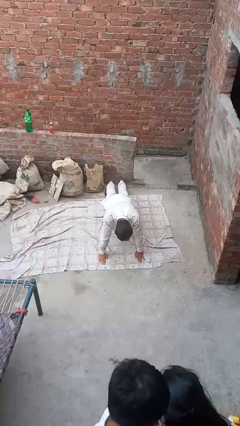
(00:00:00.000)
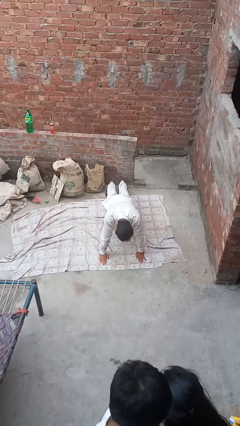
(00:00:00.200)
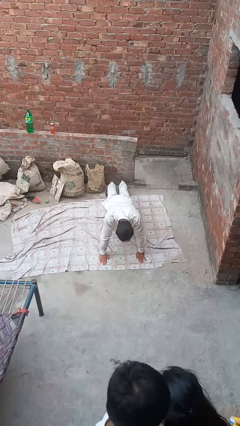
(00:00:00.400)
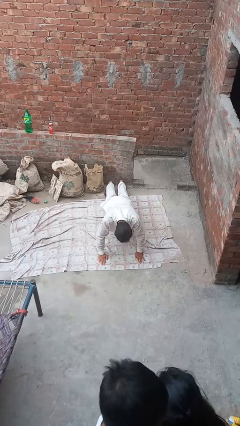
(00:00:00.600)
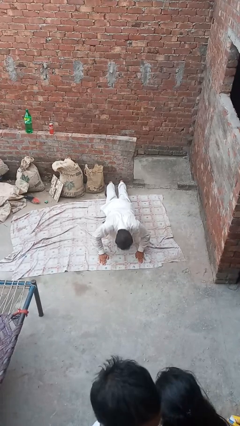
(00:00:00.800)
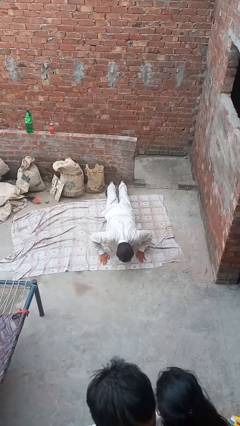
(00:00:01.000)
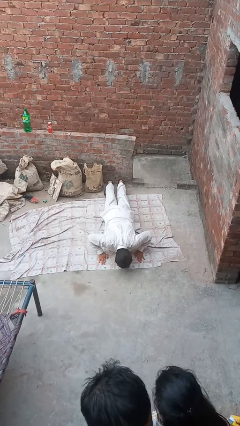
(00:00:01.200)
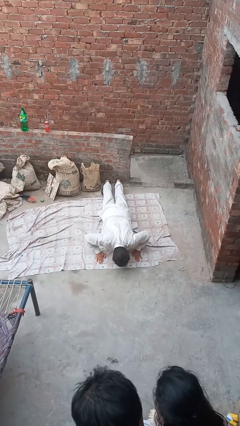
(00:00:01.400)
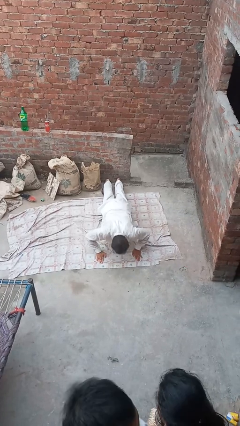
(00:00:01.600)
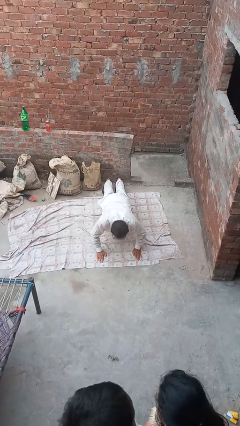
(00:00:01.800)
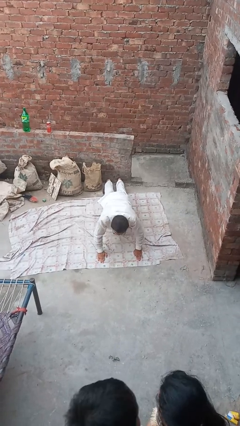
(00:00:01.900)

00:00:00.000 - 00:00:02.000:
person exercises with pushup

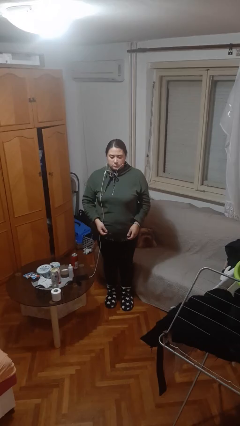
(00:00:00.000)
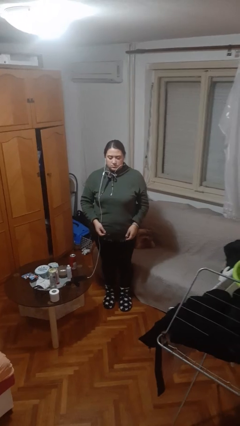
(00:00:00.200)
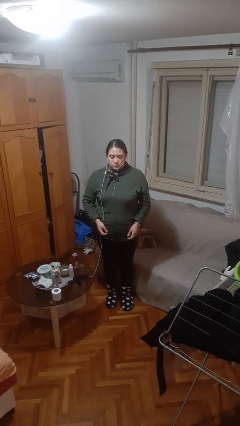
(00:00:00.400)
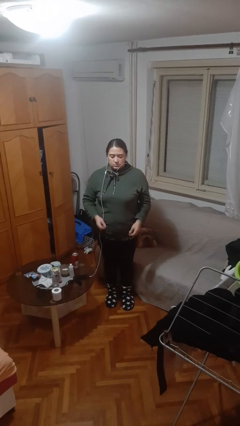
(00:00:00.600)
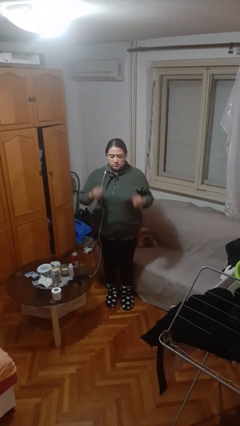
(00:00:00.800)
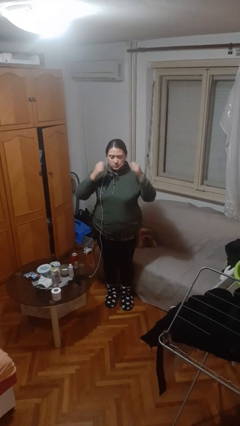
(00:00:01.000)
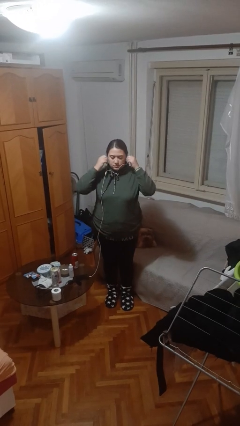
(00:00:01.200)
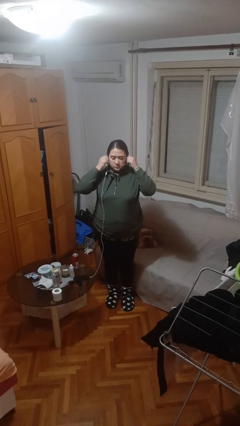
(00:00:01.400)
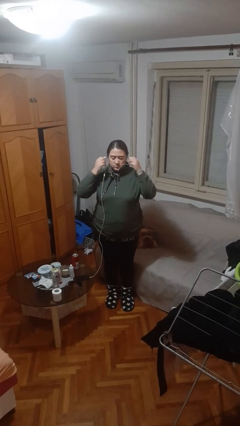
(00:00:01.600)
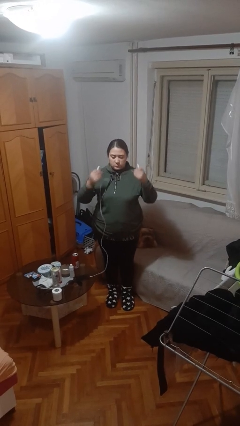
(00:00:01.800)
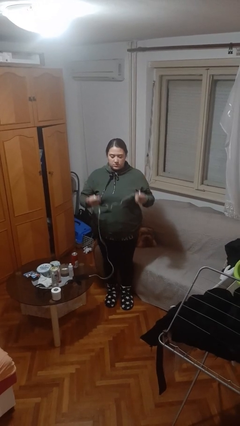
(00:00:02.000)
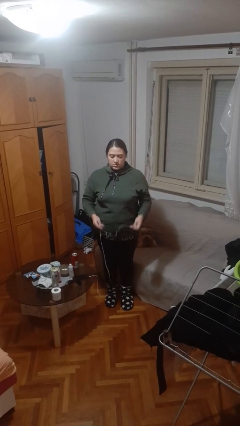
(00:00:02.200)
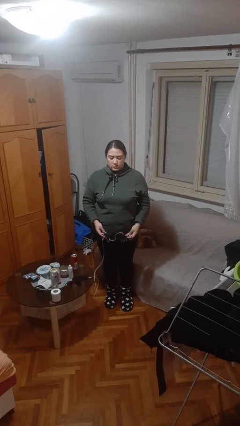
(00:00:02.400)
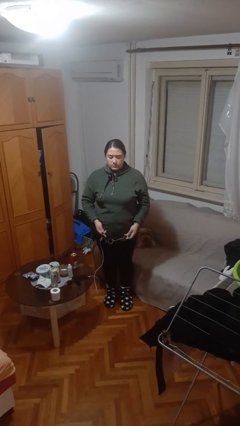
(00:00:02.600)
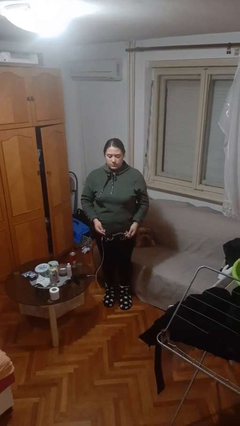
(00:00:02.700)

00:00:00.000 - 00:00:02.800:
person takes off headphones

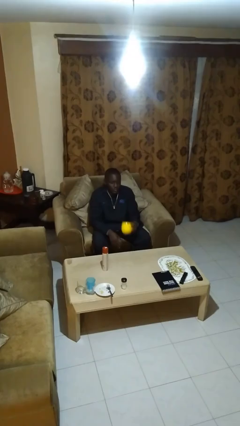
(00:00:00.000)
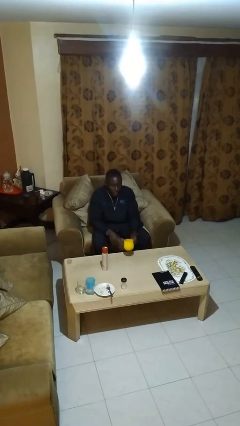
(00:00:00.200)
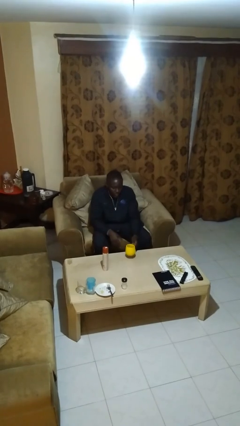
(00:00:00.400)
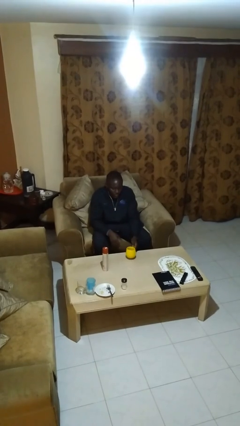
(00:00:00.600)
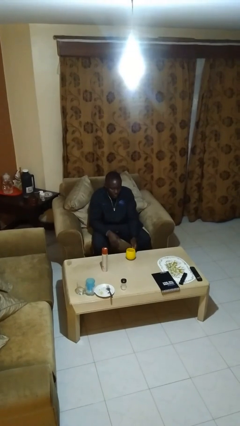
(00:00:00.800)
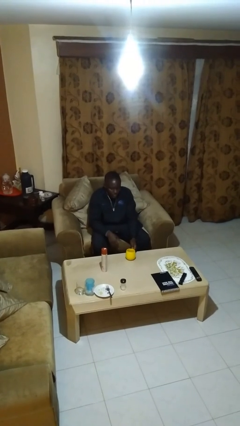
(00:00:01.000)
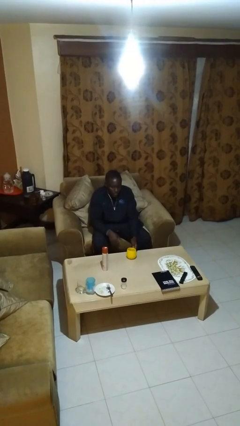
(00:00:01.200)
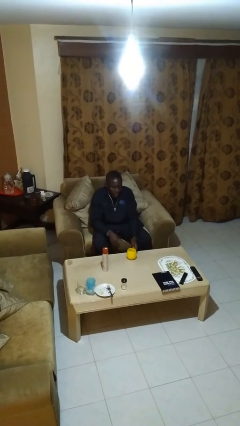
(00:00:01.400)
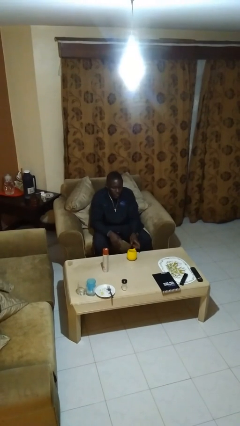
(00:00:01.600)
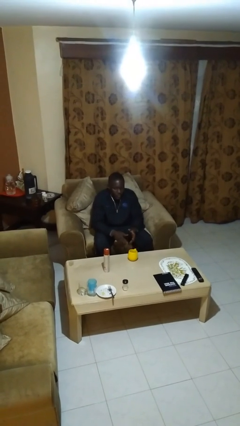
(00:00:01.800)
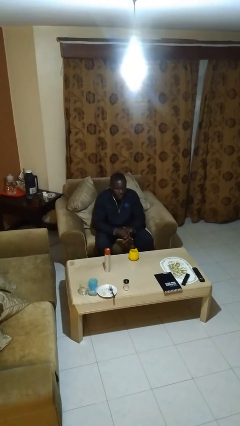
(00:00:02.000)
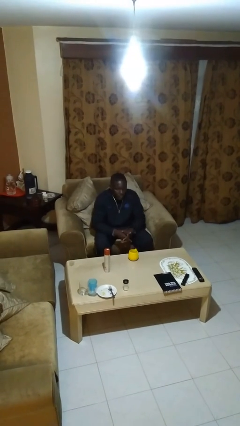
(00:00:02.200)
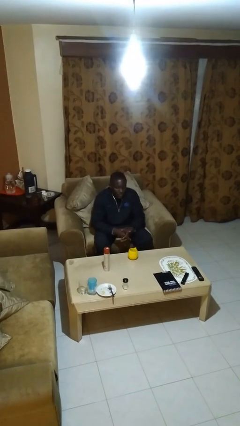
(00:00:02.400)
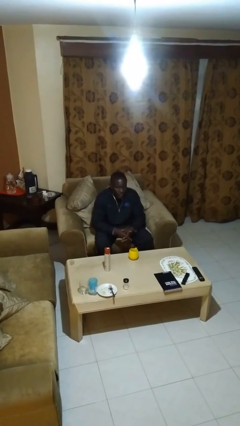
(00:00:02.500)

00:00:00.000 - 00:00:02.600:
person puts down object on table

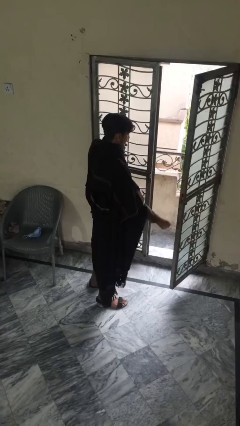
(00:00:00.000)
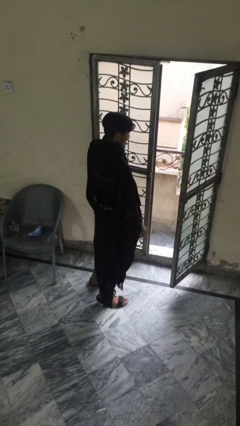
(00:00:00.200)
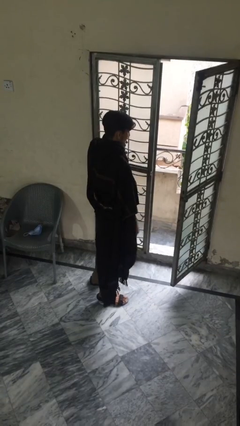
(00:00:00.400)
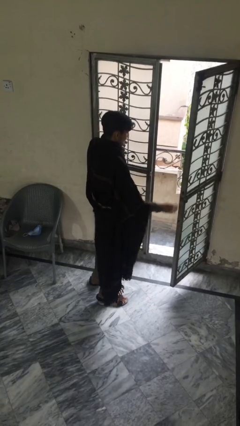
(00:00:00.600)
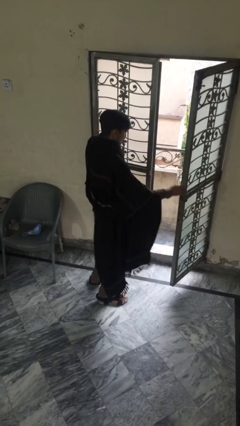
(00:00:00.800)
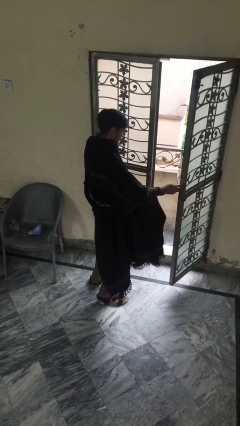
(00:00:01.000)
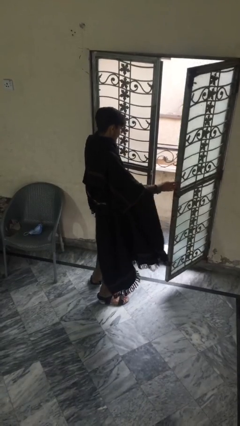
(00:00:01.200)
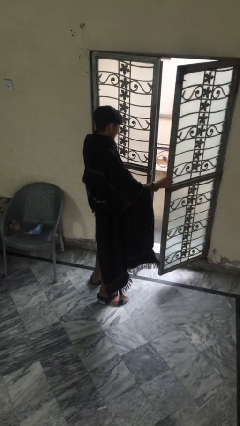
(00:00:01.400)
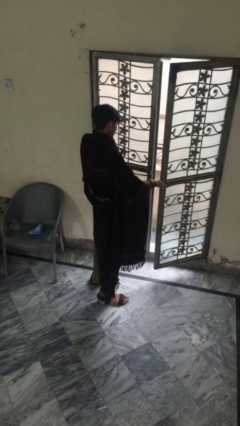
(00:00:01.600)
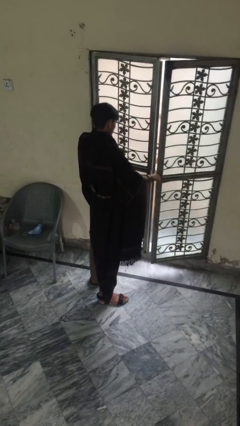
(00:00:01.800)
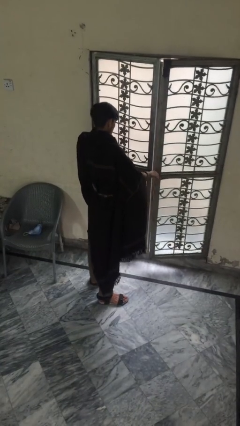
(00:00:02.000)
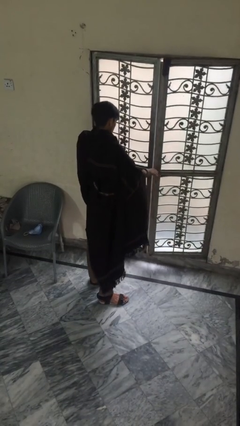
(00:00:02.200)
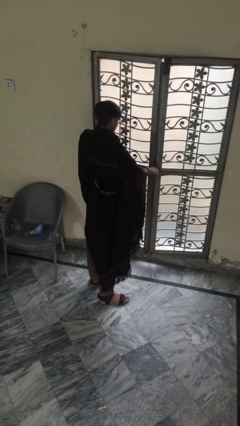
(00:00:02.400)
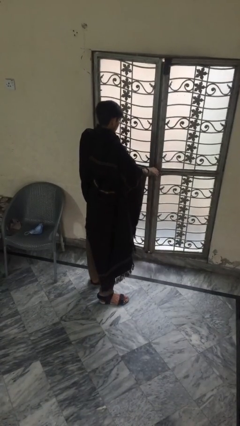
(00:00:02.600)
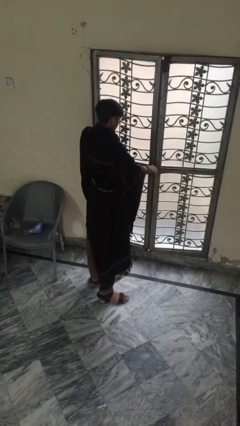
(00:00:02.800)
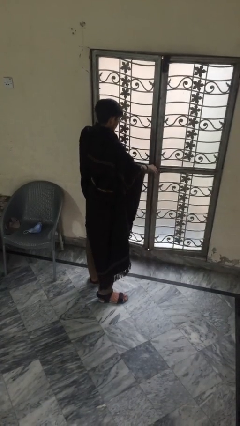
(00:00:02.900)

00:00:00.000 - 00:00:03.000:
person closes facility door

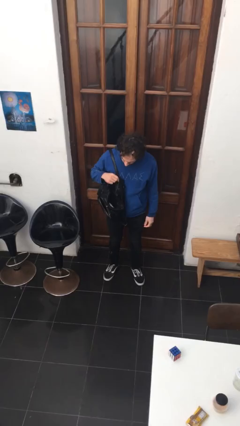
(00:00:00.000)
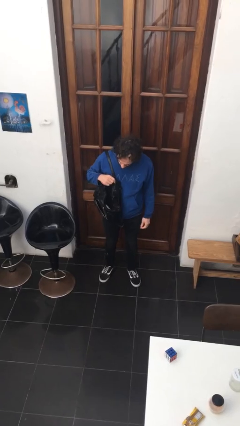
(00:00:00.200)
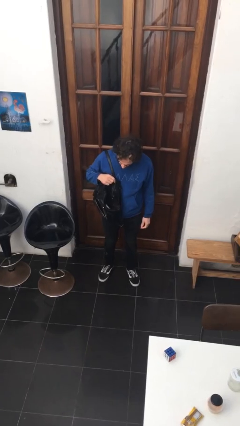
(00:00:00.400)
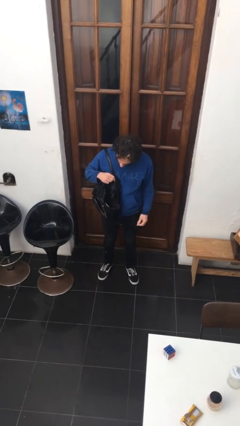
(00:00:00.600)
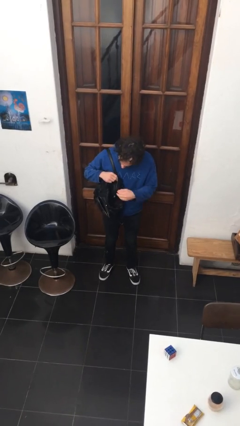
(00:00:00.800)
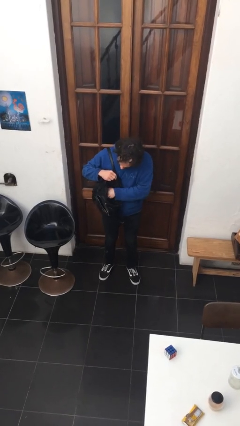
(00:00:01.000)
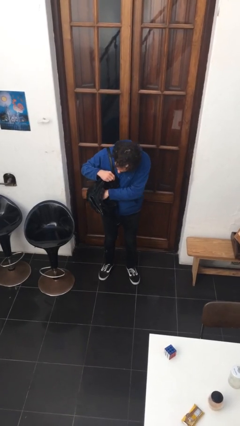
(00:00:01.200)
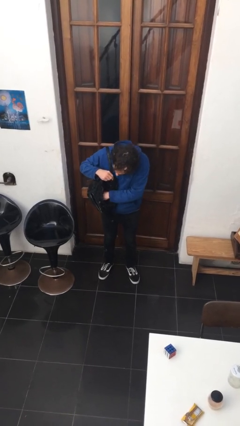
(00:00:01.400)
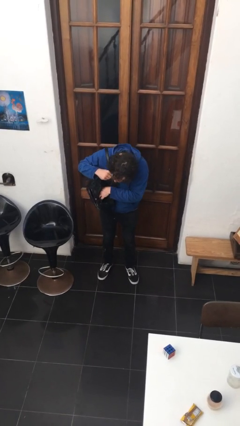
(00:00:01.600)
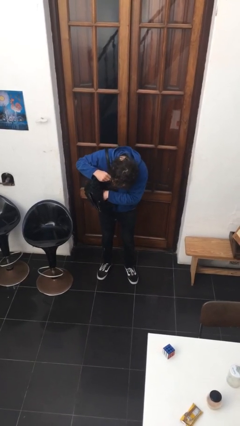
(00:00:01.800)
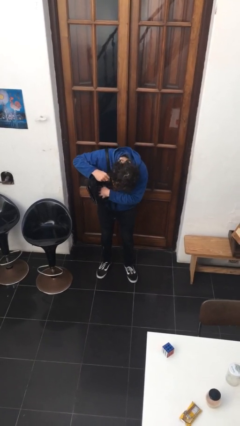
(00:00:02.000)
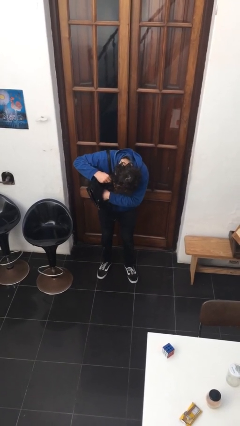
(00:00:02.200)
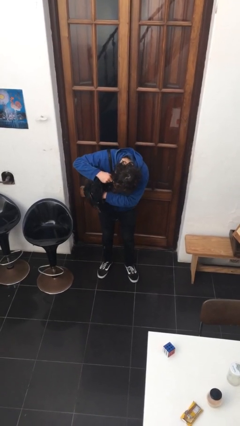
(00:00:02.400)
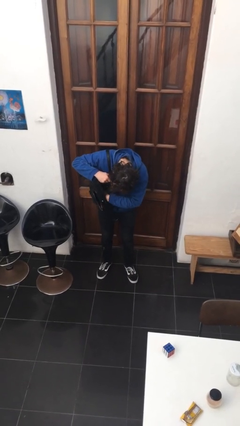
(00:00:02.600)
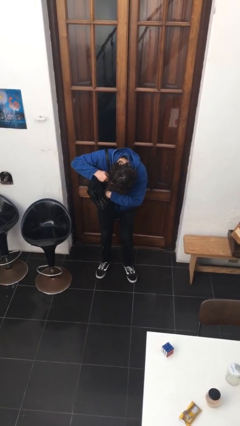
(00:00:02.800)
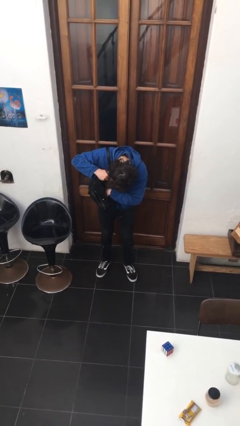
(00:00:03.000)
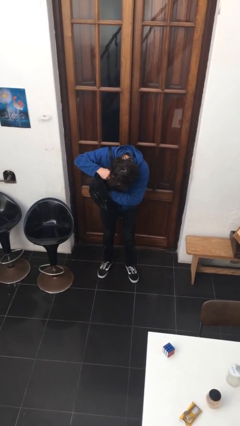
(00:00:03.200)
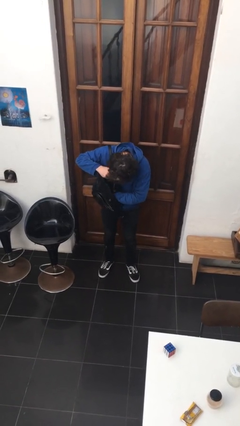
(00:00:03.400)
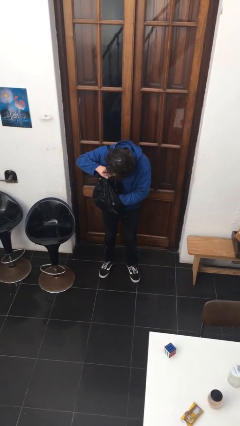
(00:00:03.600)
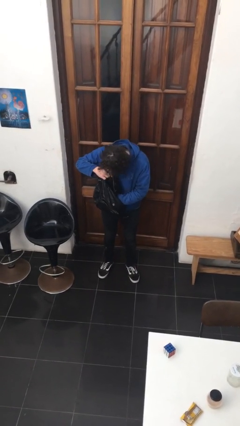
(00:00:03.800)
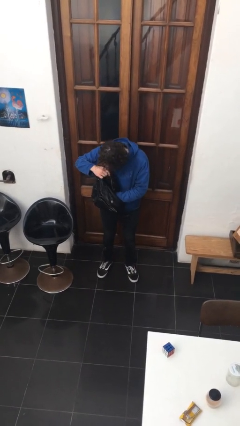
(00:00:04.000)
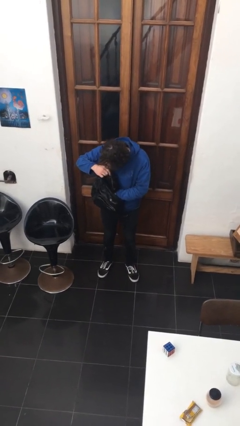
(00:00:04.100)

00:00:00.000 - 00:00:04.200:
person searches in purse

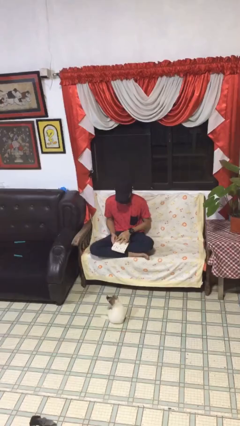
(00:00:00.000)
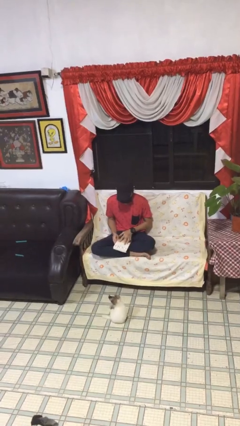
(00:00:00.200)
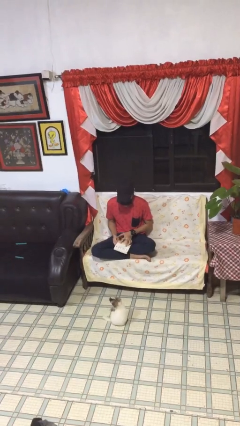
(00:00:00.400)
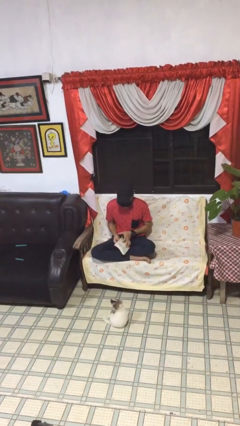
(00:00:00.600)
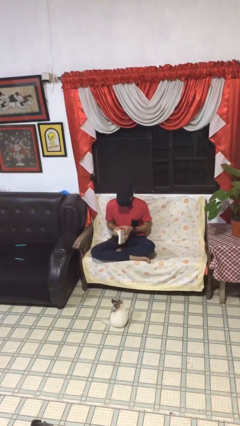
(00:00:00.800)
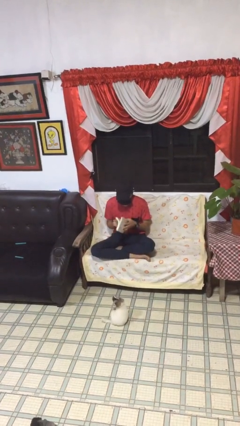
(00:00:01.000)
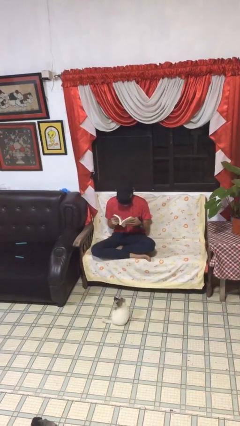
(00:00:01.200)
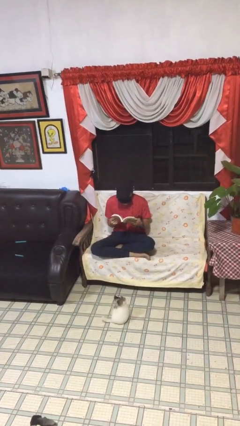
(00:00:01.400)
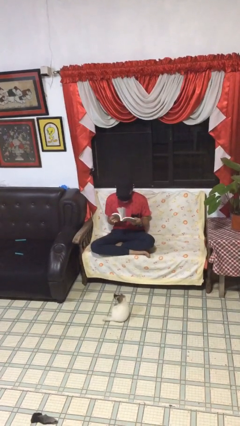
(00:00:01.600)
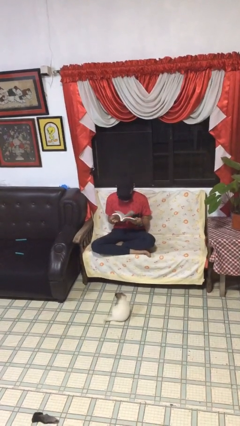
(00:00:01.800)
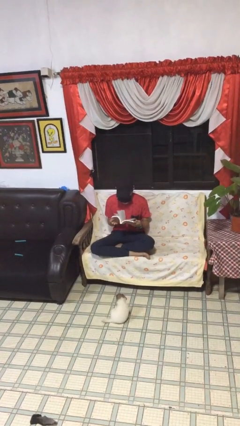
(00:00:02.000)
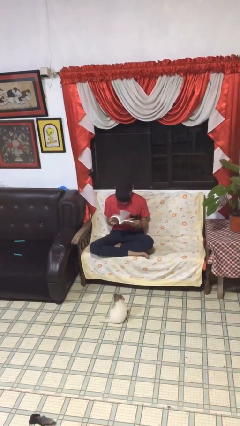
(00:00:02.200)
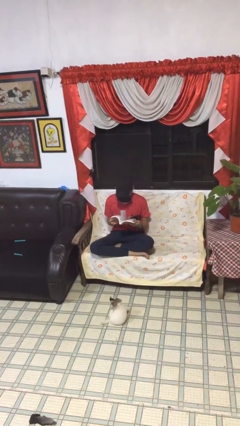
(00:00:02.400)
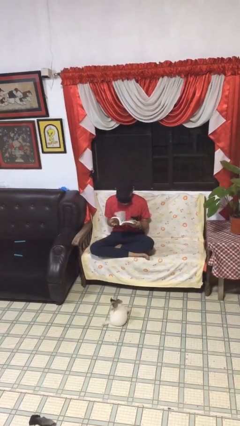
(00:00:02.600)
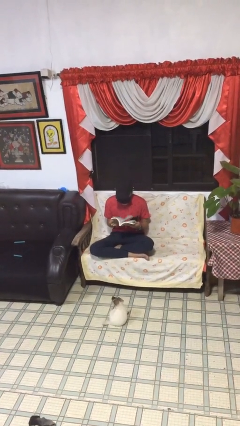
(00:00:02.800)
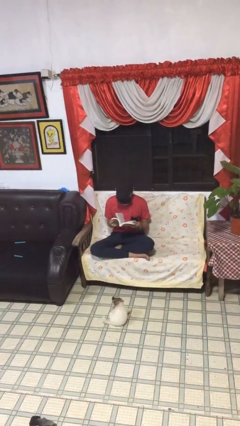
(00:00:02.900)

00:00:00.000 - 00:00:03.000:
person reads document
